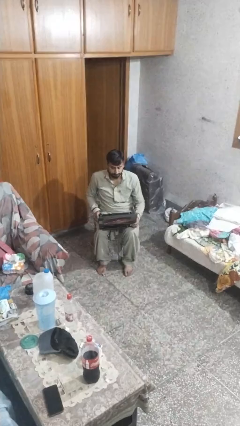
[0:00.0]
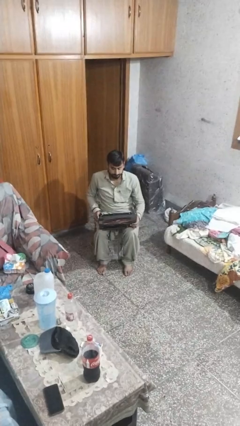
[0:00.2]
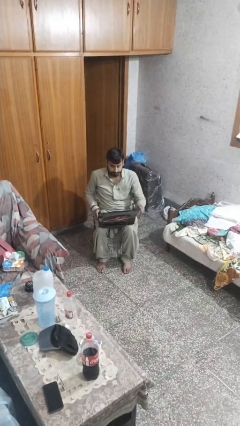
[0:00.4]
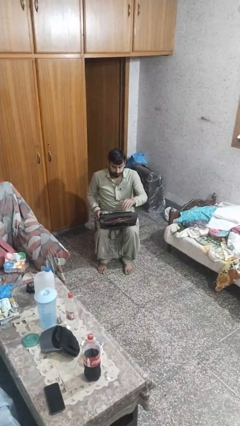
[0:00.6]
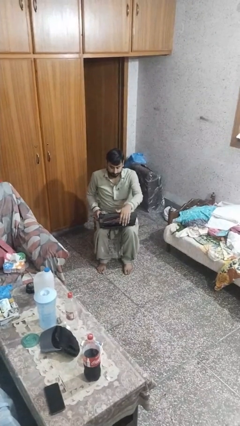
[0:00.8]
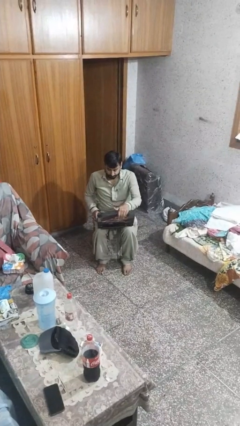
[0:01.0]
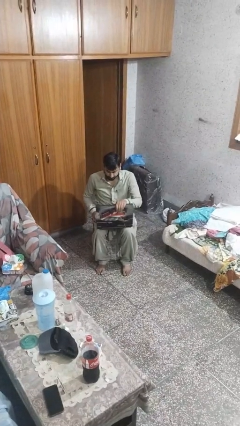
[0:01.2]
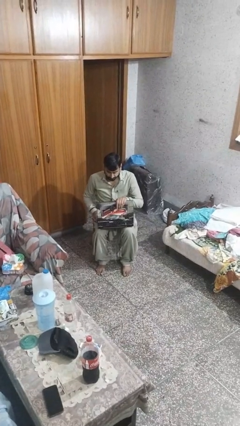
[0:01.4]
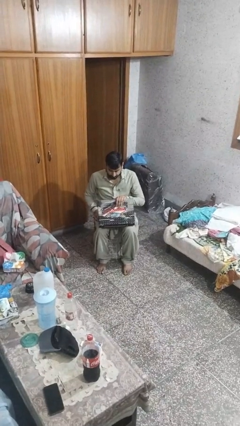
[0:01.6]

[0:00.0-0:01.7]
person closes laptop

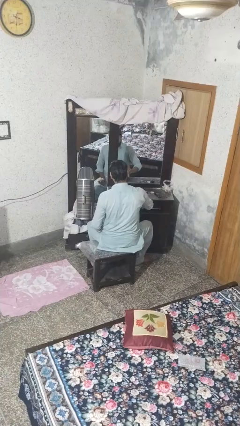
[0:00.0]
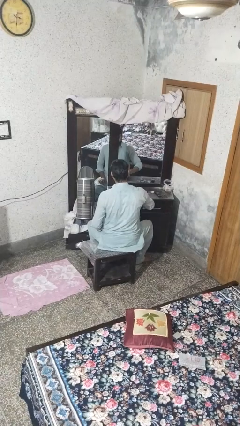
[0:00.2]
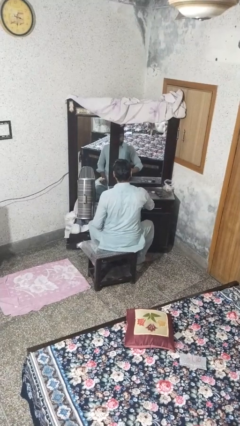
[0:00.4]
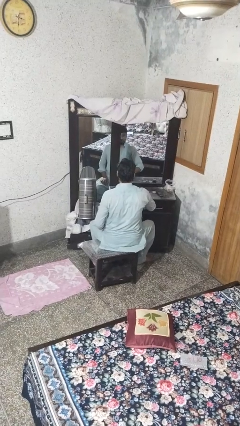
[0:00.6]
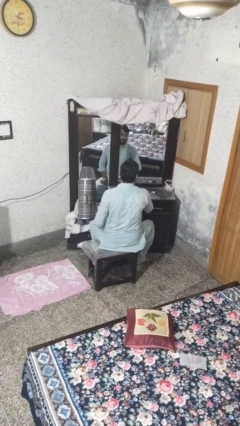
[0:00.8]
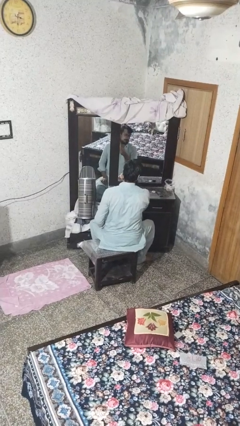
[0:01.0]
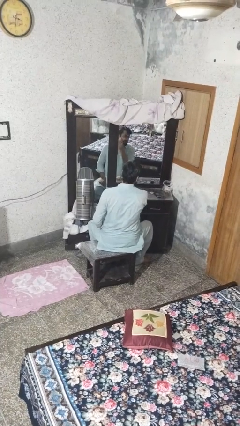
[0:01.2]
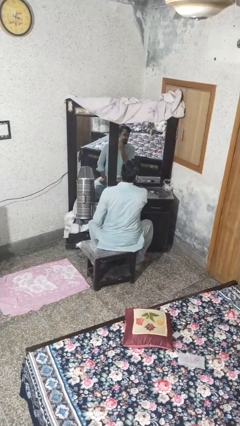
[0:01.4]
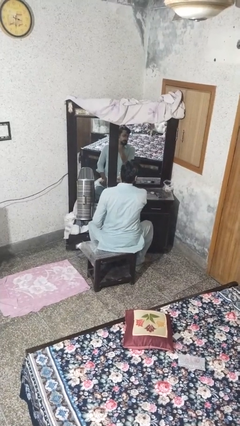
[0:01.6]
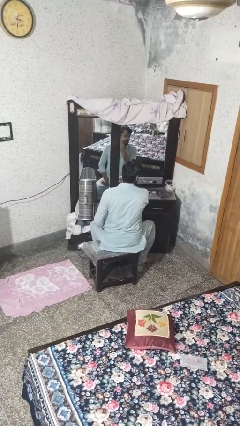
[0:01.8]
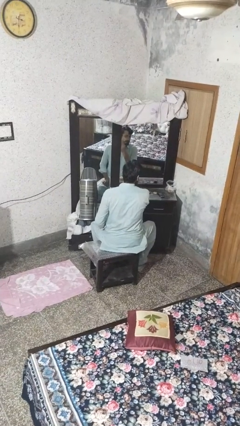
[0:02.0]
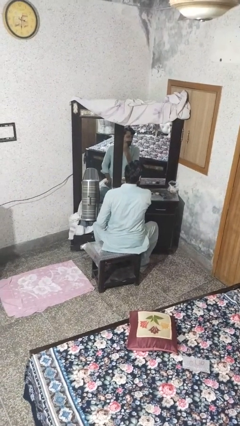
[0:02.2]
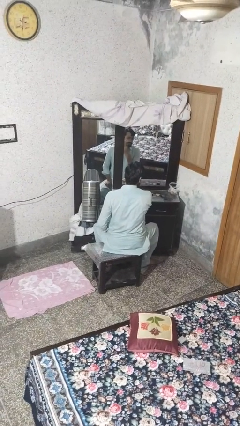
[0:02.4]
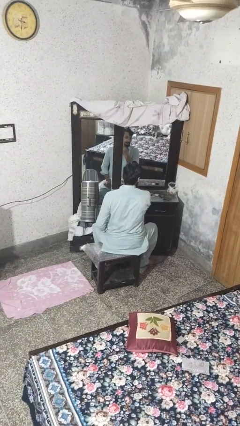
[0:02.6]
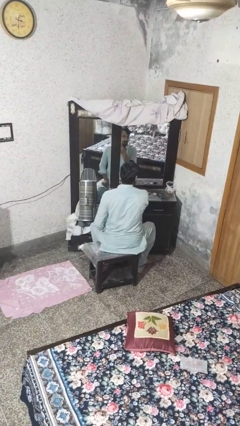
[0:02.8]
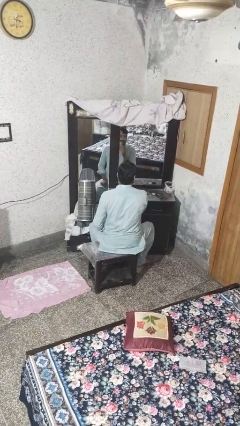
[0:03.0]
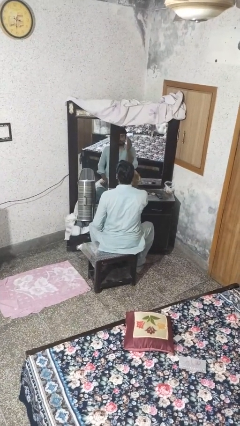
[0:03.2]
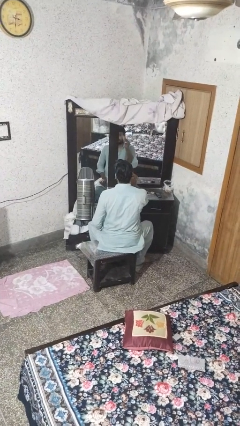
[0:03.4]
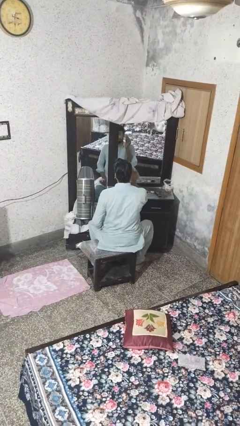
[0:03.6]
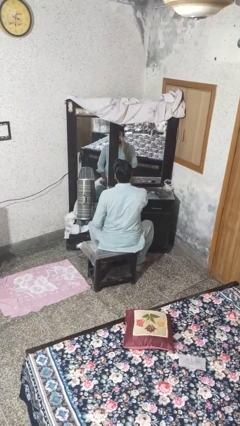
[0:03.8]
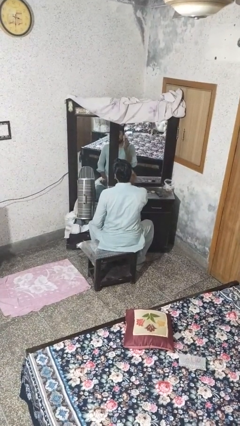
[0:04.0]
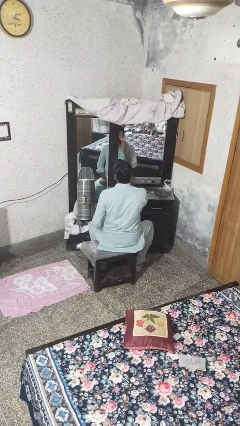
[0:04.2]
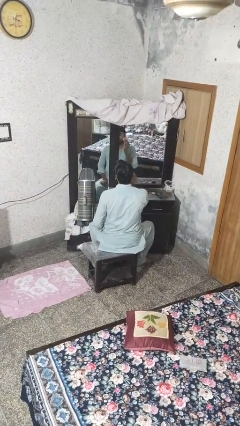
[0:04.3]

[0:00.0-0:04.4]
person applies foundation makeup

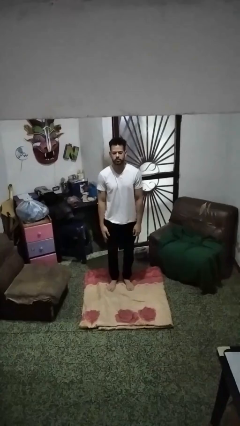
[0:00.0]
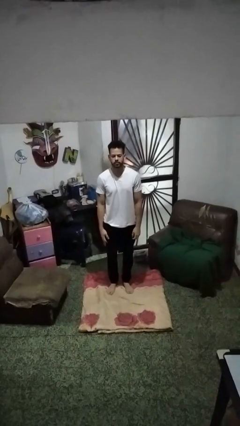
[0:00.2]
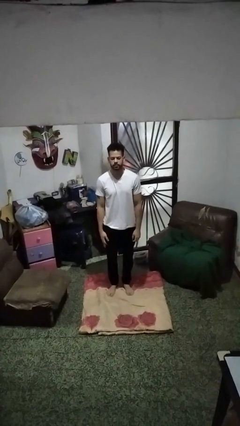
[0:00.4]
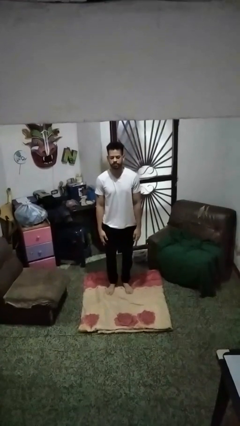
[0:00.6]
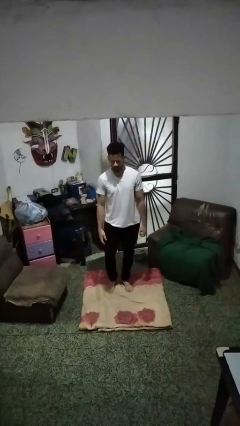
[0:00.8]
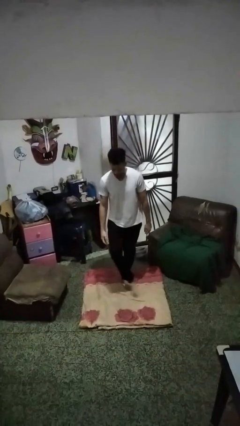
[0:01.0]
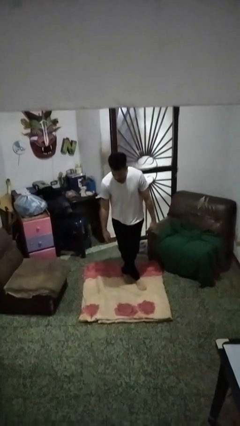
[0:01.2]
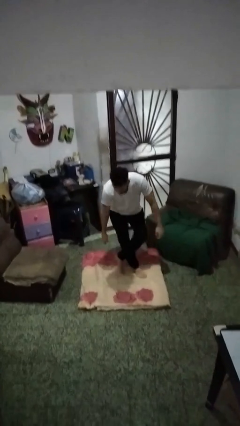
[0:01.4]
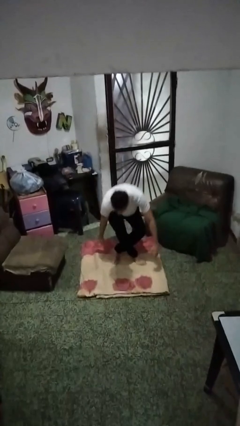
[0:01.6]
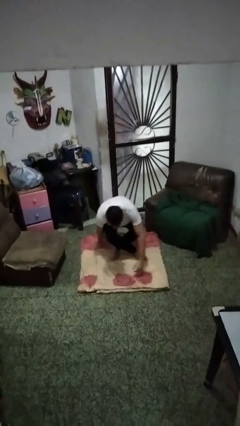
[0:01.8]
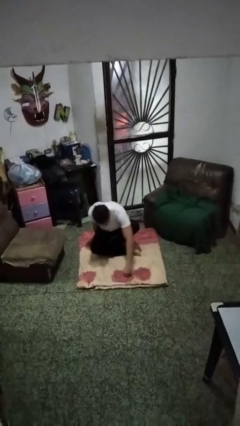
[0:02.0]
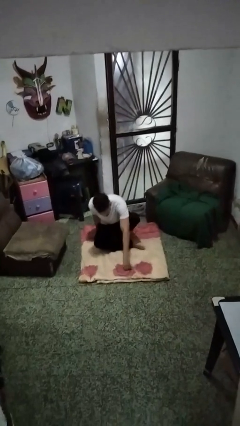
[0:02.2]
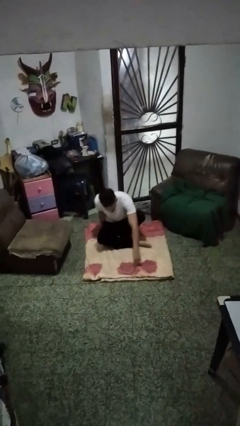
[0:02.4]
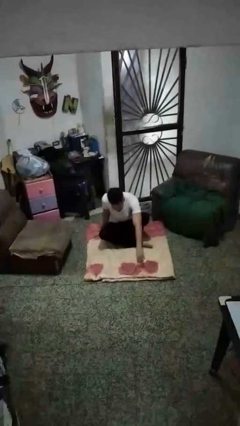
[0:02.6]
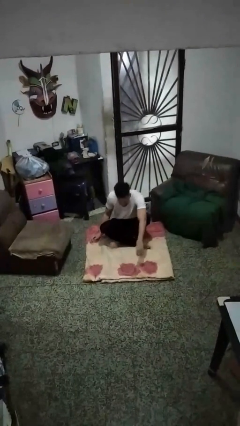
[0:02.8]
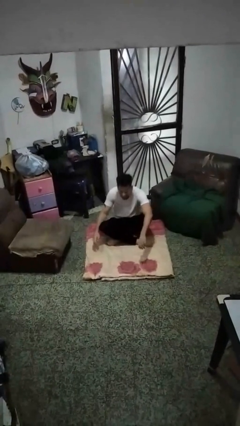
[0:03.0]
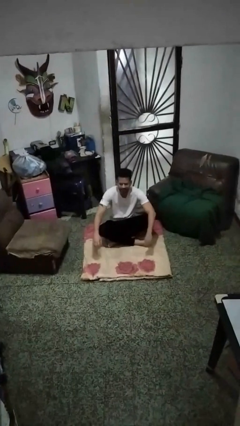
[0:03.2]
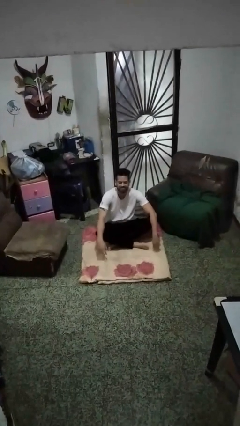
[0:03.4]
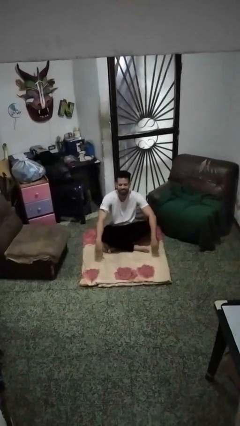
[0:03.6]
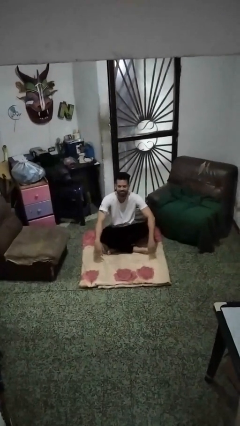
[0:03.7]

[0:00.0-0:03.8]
person sits crisscross

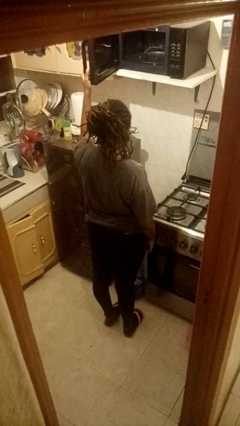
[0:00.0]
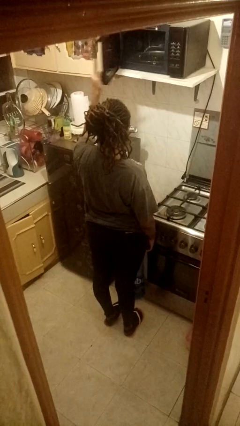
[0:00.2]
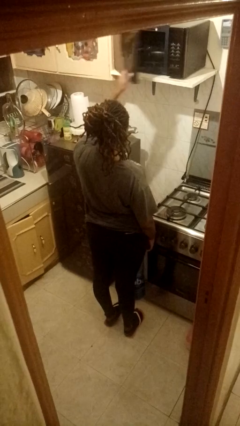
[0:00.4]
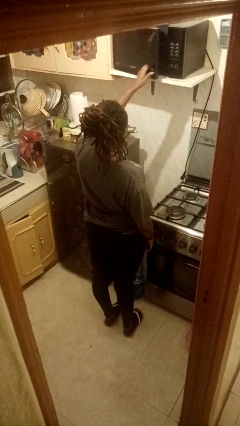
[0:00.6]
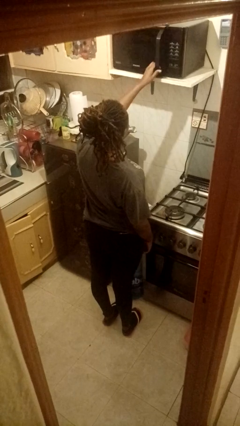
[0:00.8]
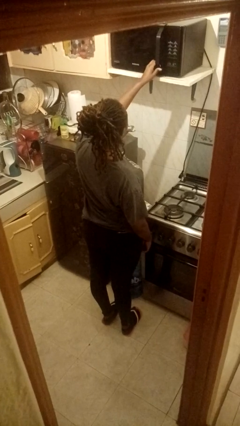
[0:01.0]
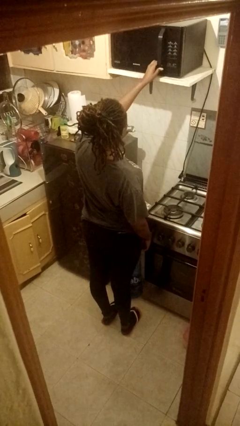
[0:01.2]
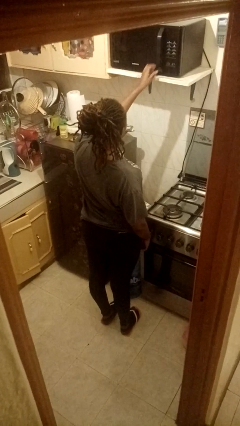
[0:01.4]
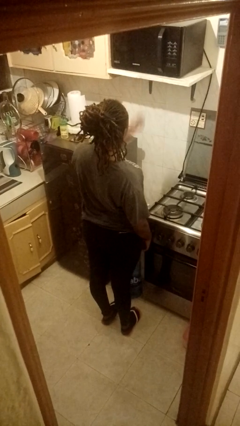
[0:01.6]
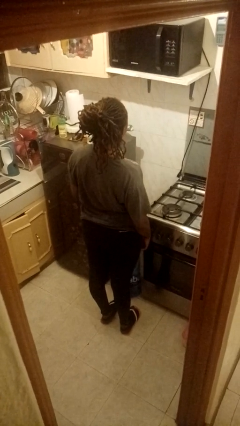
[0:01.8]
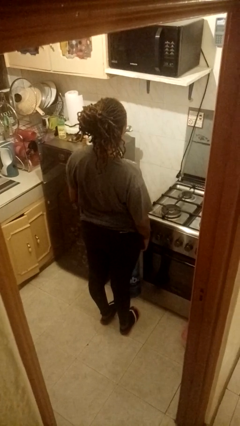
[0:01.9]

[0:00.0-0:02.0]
person closes microwave

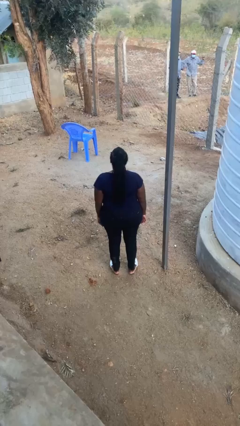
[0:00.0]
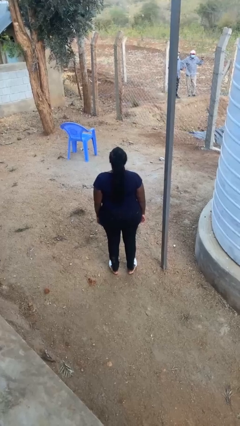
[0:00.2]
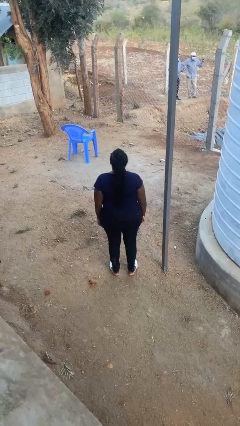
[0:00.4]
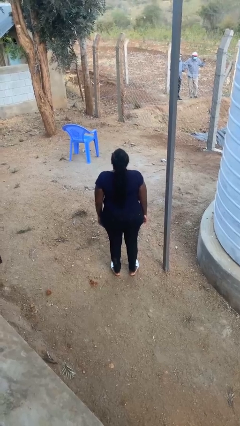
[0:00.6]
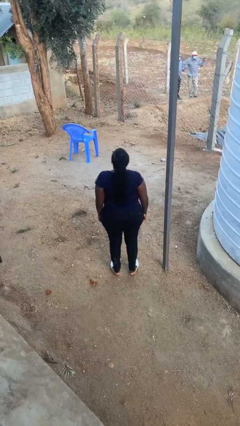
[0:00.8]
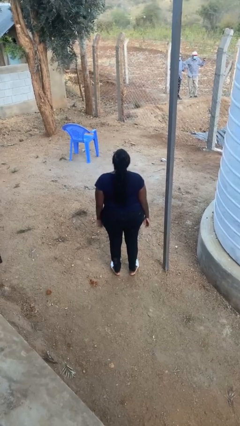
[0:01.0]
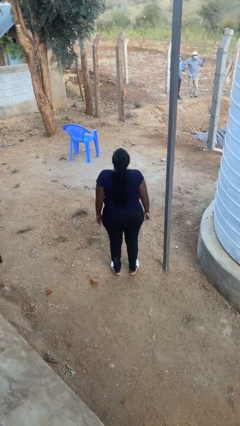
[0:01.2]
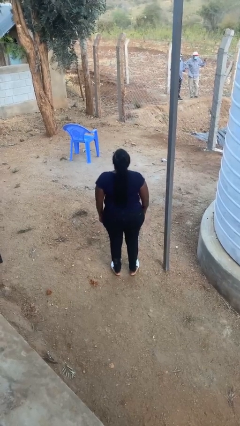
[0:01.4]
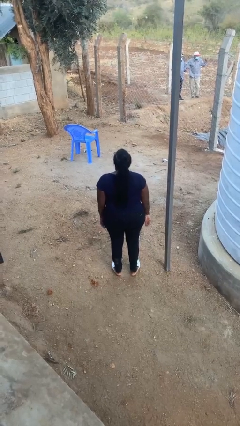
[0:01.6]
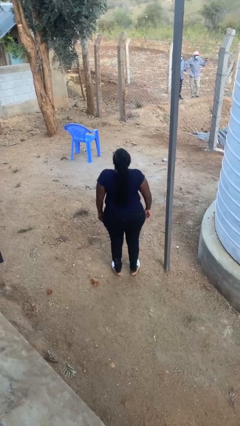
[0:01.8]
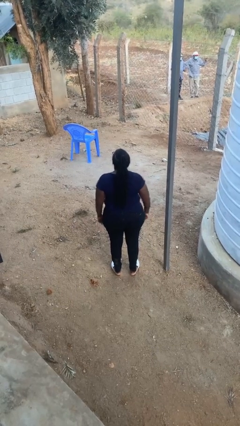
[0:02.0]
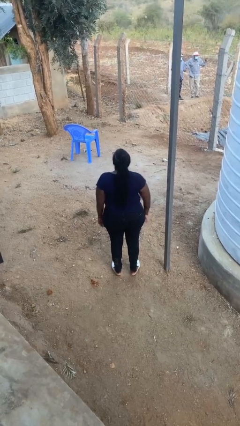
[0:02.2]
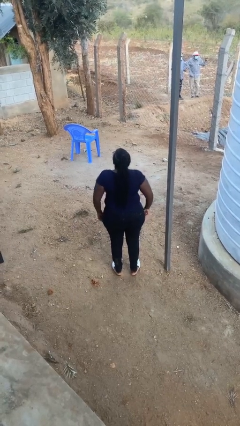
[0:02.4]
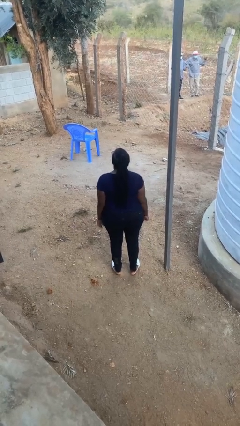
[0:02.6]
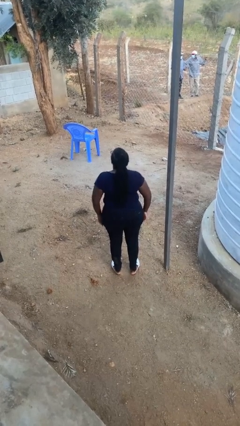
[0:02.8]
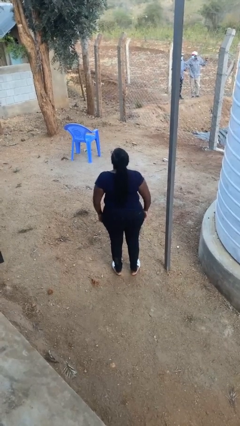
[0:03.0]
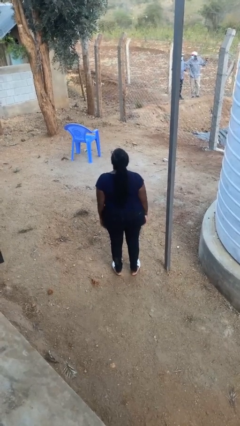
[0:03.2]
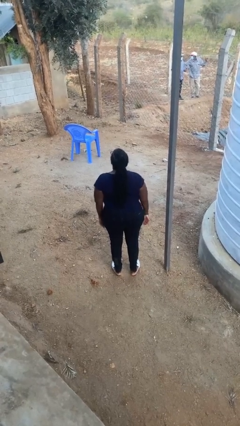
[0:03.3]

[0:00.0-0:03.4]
person shrugs

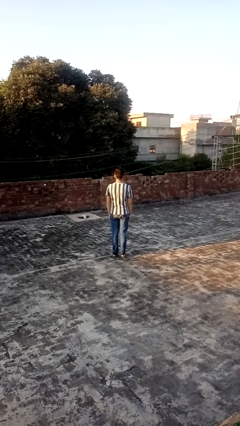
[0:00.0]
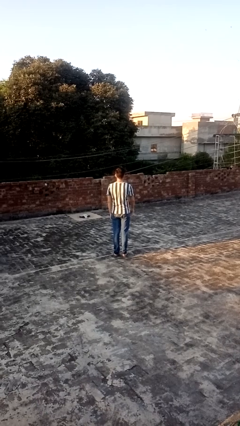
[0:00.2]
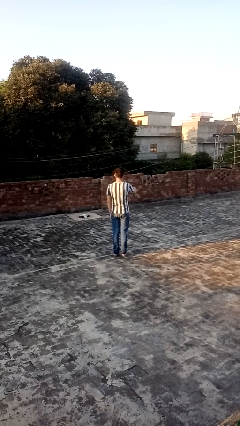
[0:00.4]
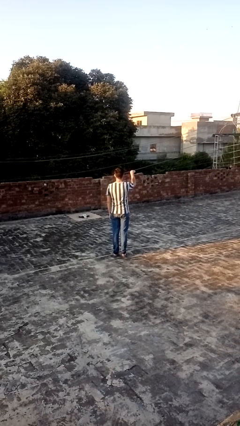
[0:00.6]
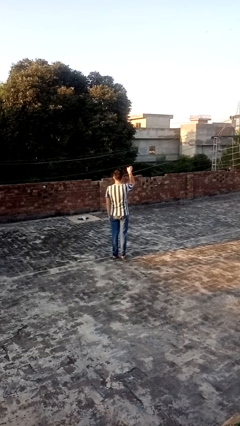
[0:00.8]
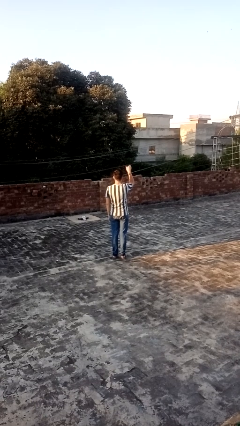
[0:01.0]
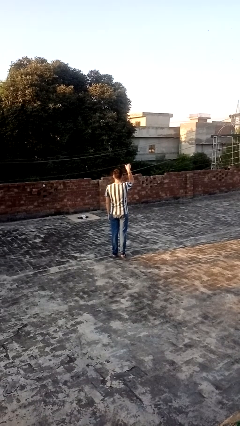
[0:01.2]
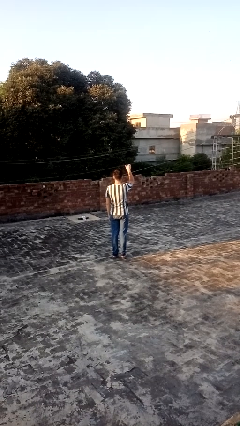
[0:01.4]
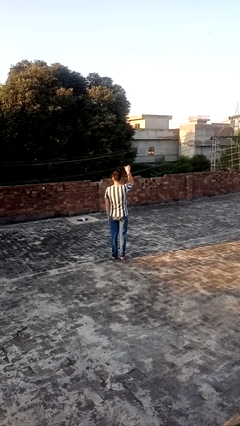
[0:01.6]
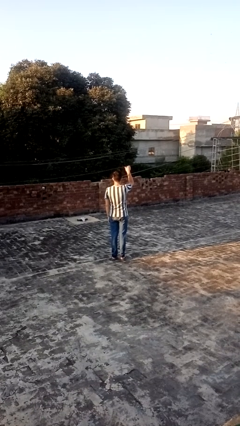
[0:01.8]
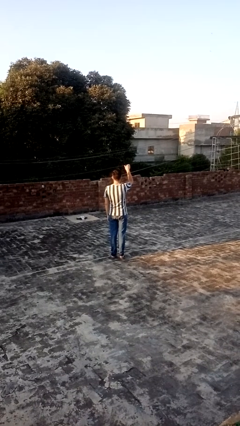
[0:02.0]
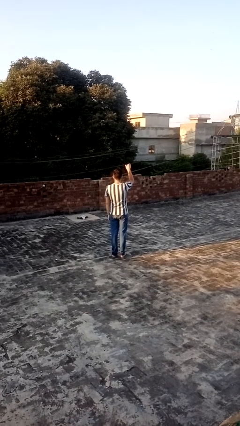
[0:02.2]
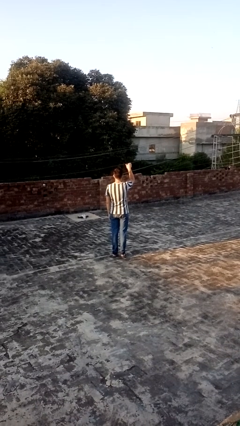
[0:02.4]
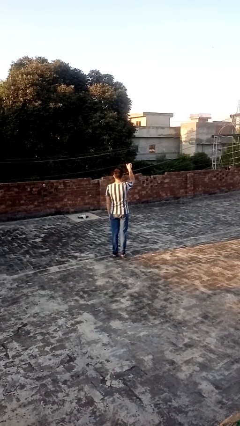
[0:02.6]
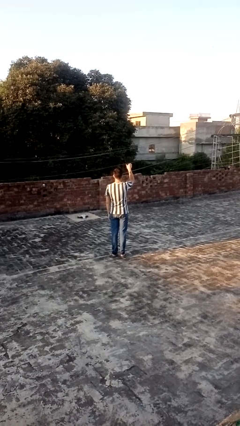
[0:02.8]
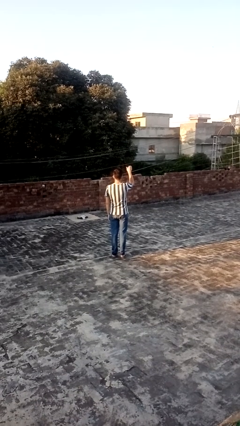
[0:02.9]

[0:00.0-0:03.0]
person gestures swipe up
